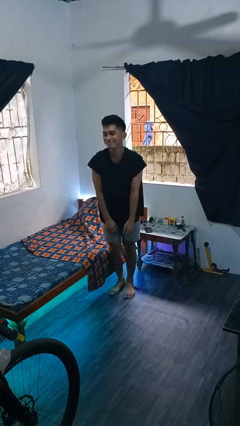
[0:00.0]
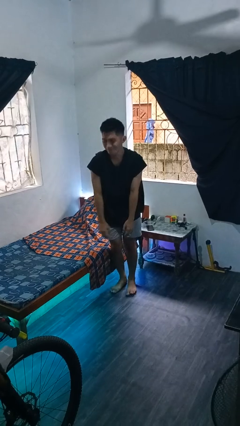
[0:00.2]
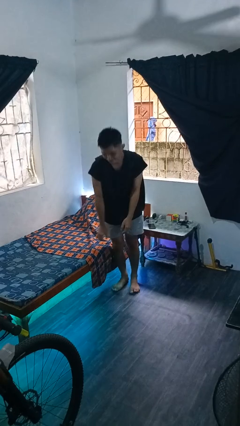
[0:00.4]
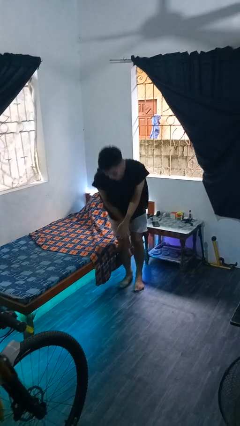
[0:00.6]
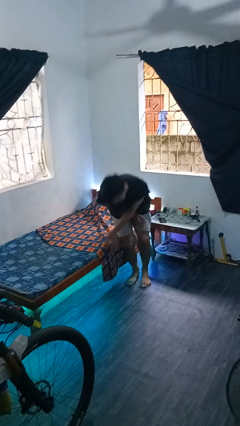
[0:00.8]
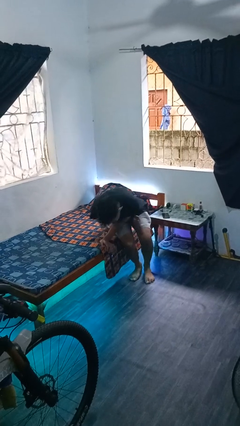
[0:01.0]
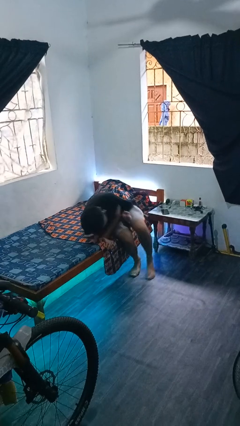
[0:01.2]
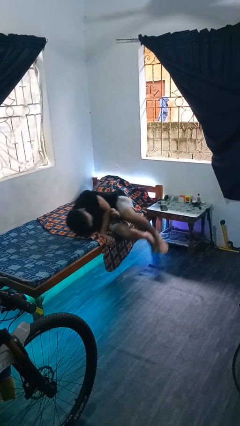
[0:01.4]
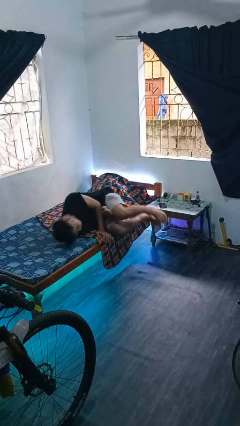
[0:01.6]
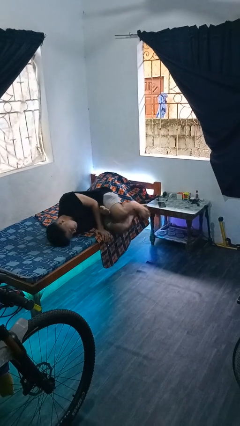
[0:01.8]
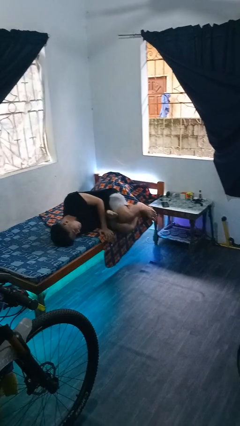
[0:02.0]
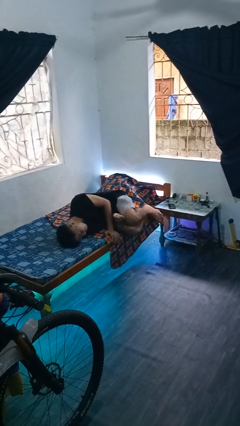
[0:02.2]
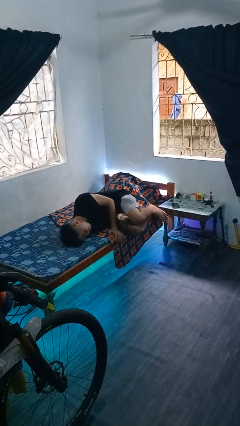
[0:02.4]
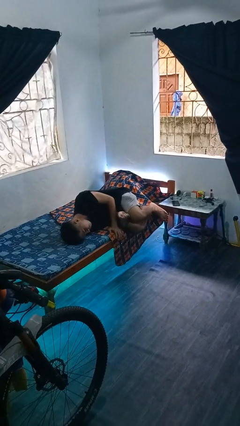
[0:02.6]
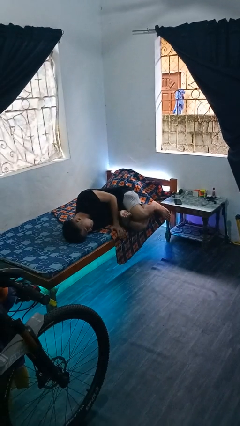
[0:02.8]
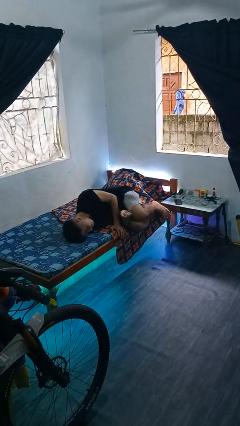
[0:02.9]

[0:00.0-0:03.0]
person lies down on bed

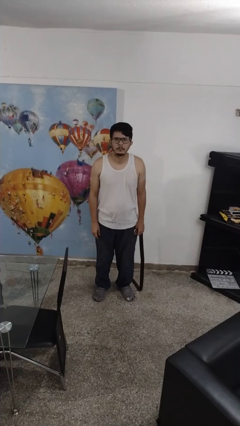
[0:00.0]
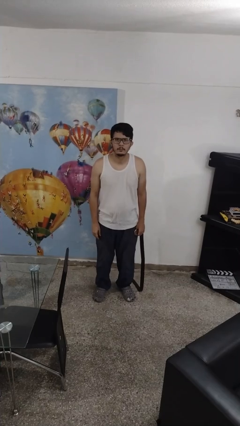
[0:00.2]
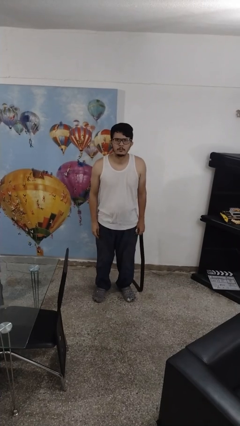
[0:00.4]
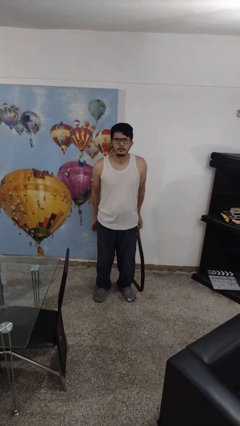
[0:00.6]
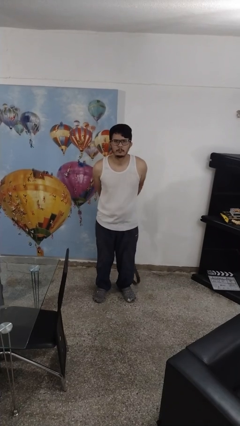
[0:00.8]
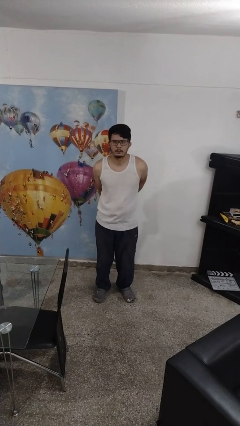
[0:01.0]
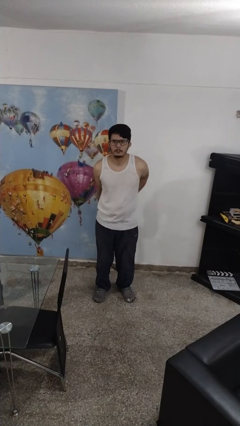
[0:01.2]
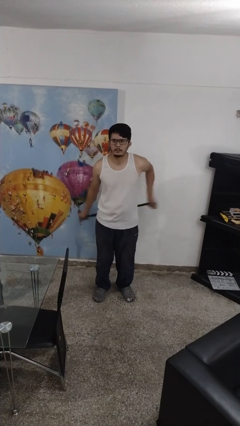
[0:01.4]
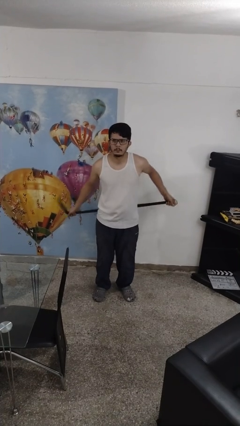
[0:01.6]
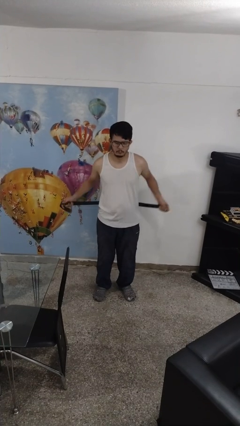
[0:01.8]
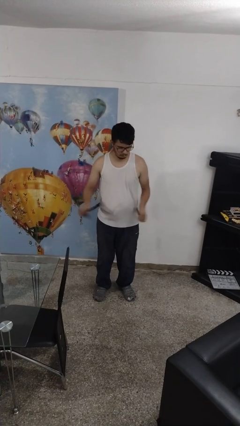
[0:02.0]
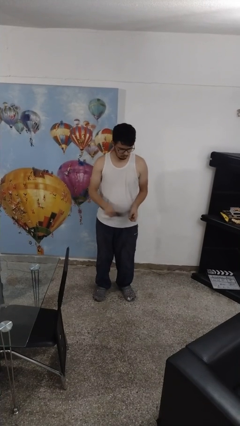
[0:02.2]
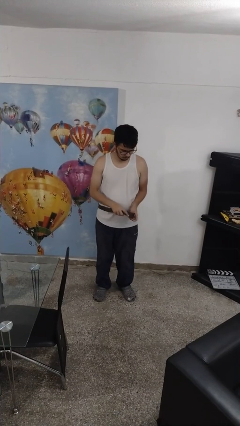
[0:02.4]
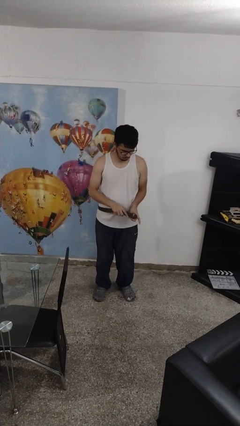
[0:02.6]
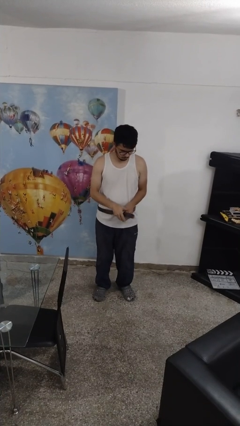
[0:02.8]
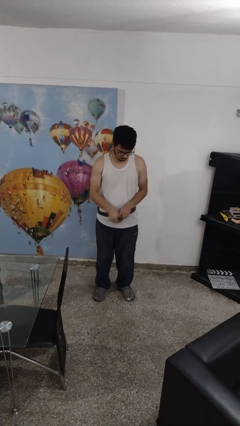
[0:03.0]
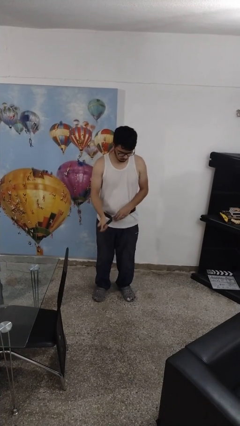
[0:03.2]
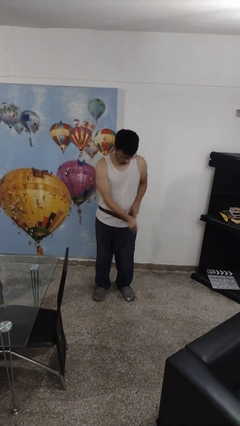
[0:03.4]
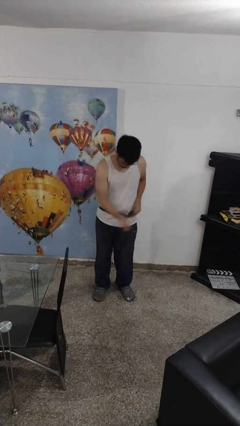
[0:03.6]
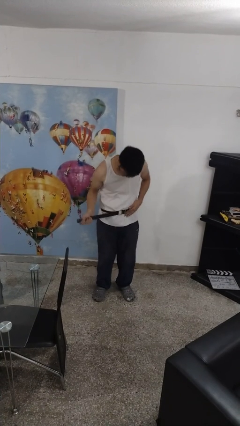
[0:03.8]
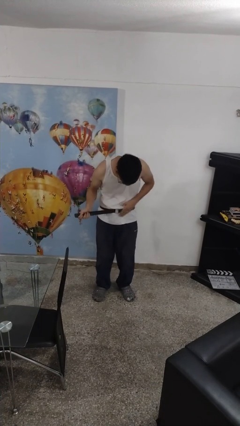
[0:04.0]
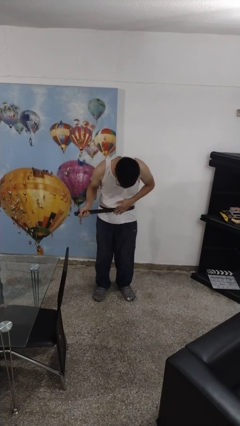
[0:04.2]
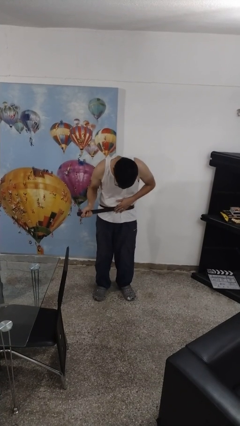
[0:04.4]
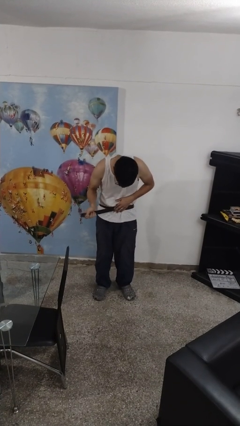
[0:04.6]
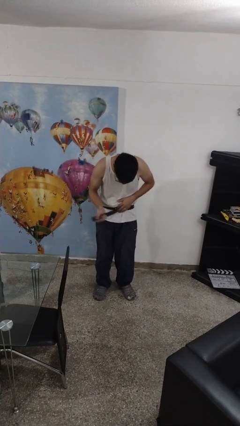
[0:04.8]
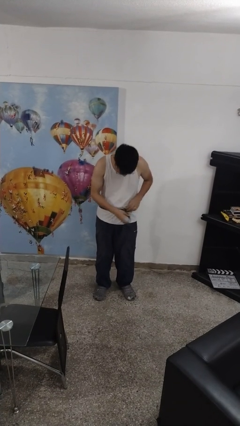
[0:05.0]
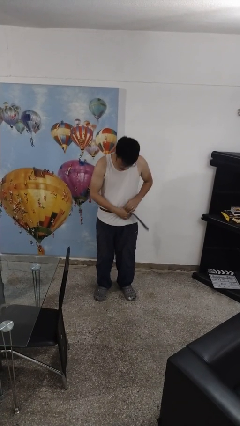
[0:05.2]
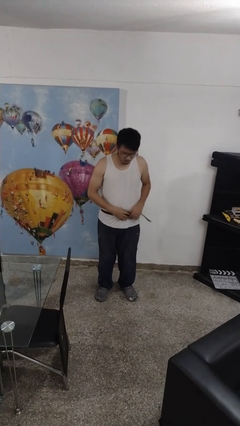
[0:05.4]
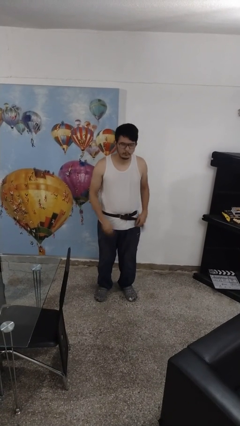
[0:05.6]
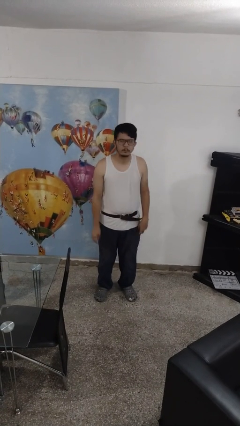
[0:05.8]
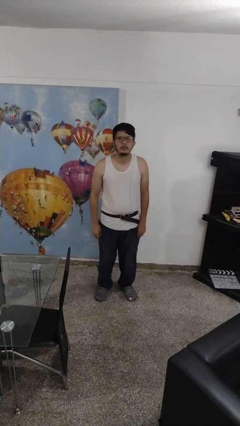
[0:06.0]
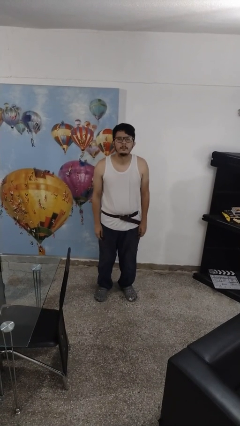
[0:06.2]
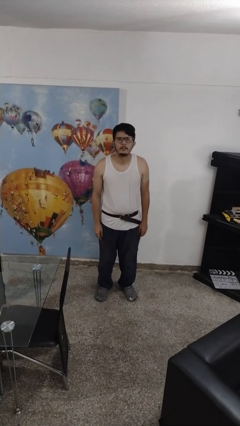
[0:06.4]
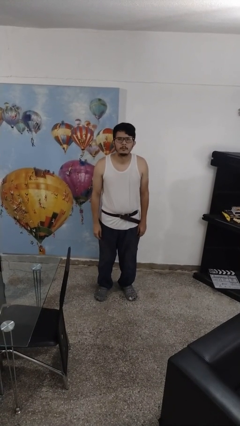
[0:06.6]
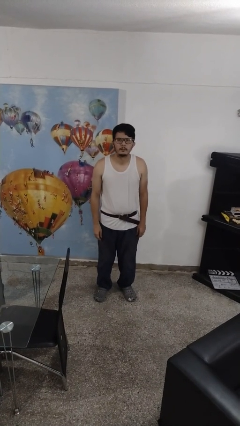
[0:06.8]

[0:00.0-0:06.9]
person puts on belt

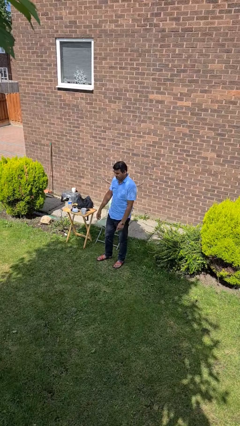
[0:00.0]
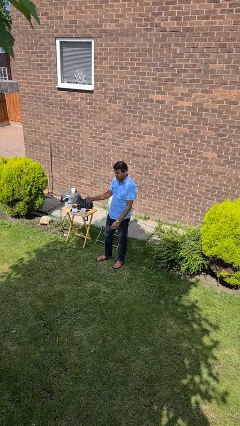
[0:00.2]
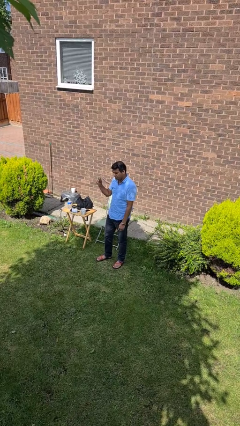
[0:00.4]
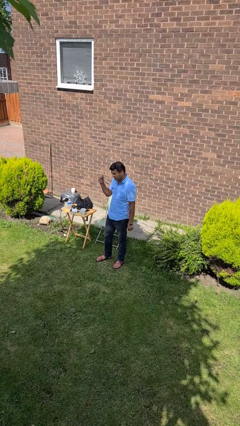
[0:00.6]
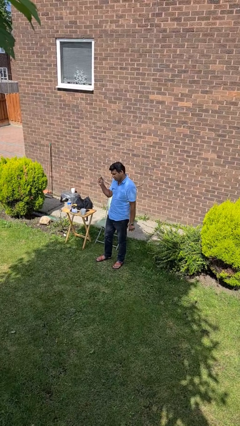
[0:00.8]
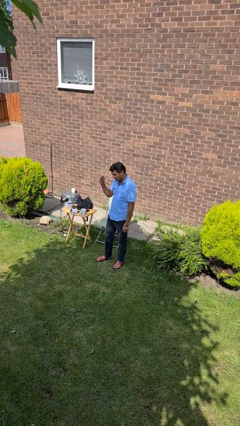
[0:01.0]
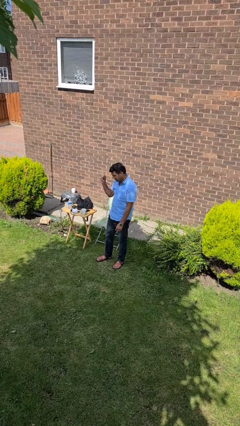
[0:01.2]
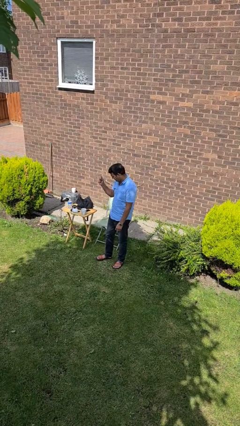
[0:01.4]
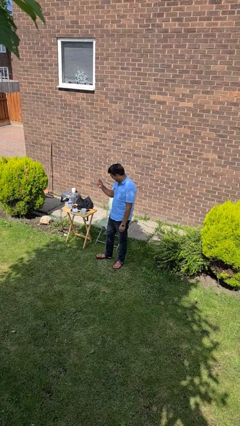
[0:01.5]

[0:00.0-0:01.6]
person snaps fingers

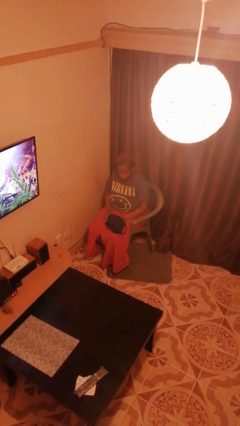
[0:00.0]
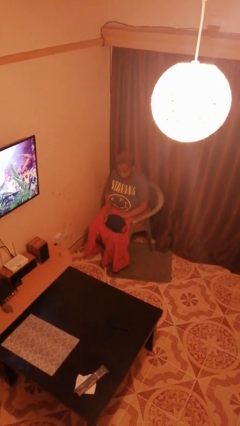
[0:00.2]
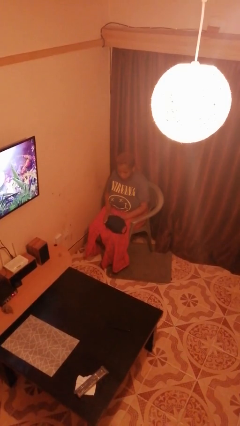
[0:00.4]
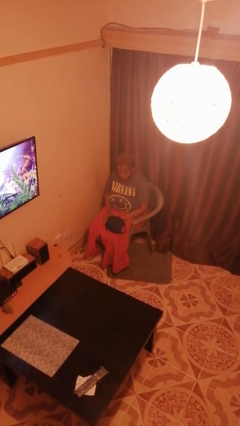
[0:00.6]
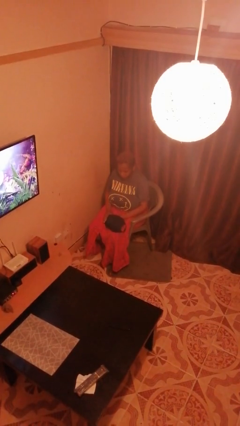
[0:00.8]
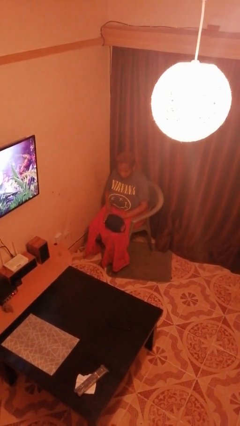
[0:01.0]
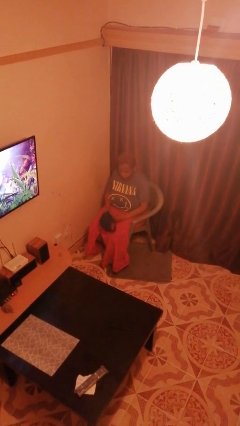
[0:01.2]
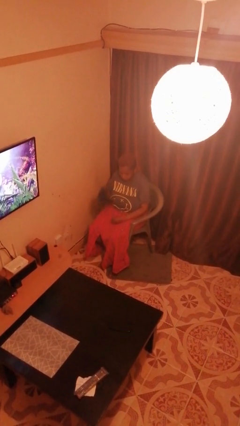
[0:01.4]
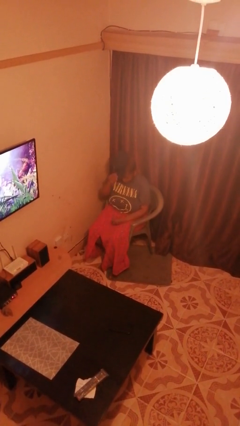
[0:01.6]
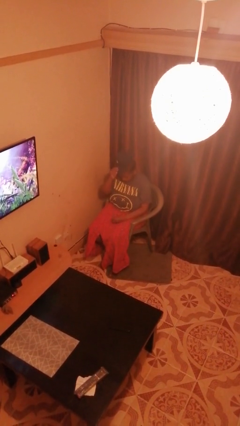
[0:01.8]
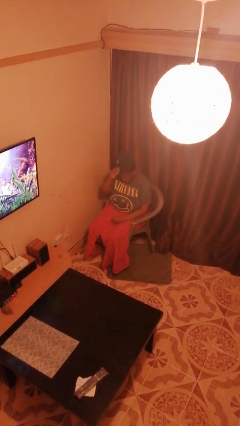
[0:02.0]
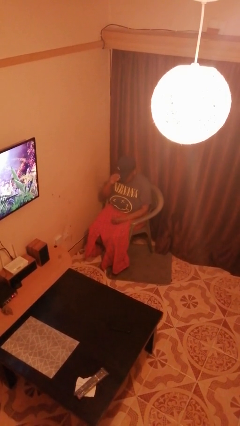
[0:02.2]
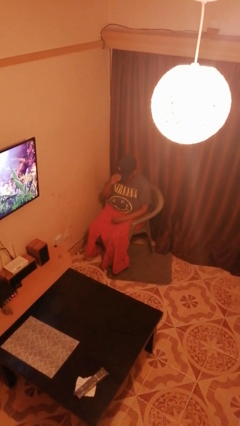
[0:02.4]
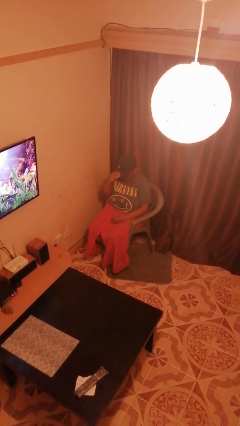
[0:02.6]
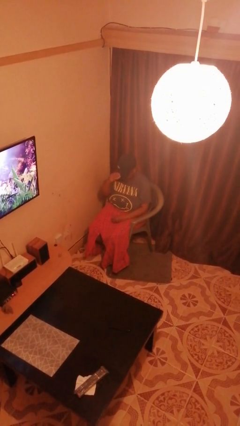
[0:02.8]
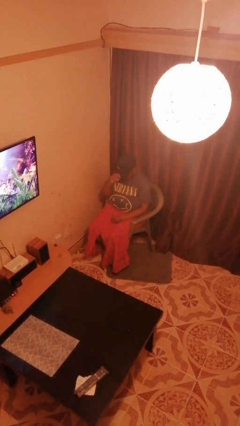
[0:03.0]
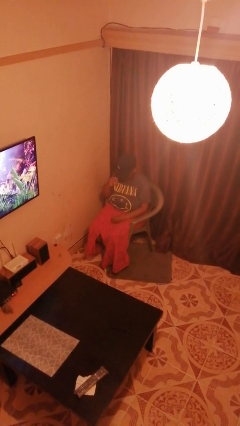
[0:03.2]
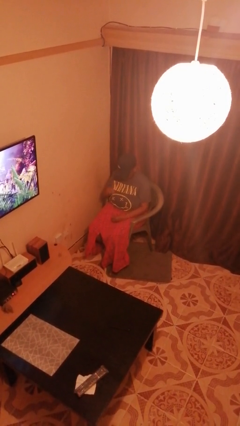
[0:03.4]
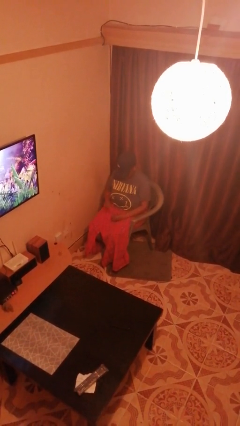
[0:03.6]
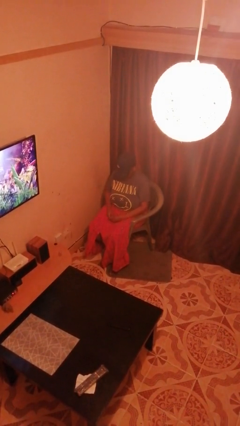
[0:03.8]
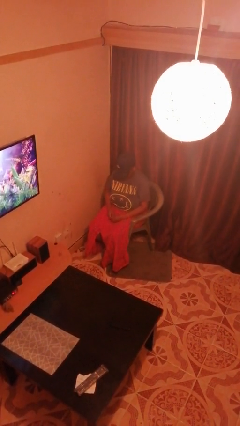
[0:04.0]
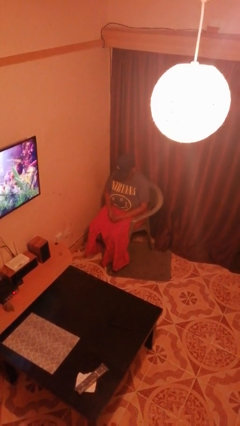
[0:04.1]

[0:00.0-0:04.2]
person puts on hat

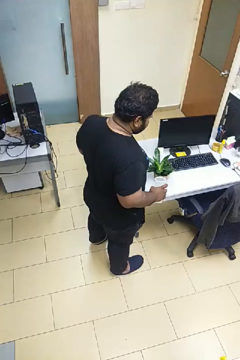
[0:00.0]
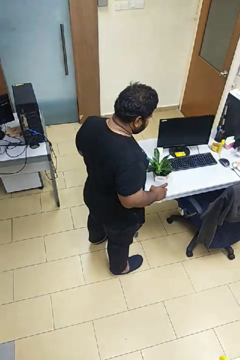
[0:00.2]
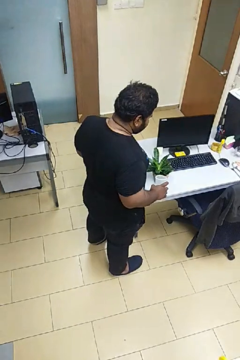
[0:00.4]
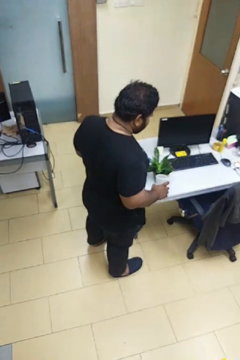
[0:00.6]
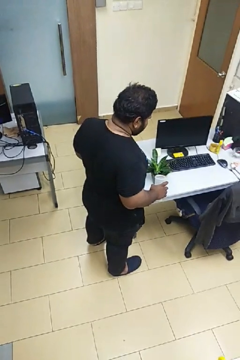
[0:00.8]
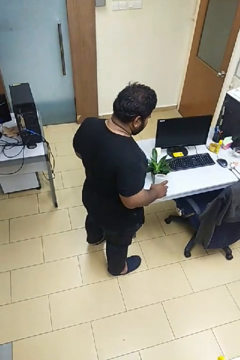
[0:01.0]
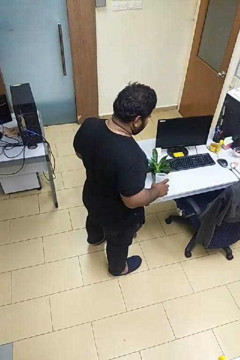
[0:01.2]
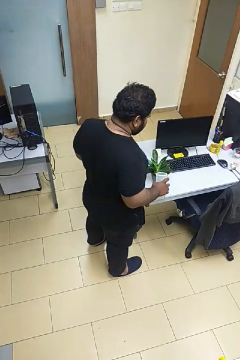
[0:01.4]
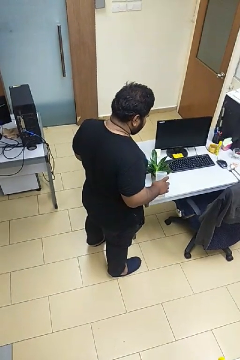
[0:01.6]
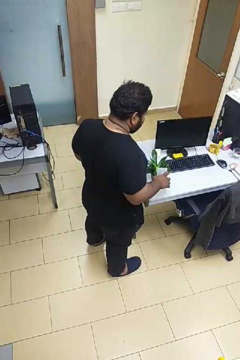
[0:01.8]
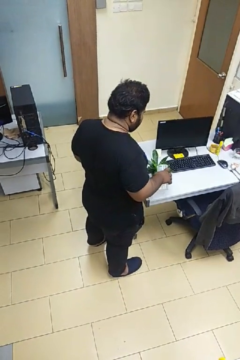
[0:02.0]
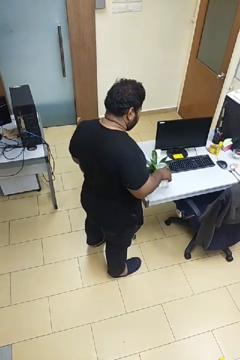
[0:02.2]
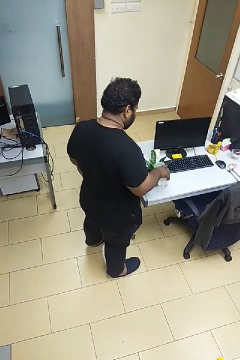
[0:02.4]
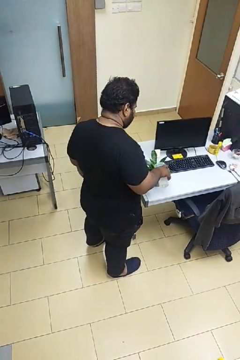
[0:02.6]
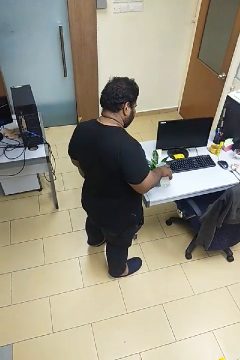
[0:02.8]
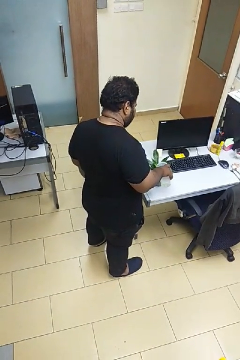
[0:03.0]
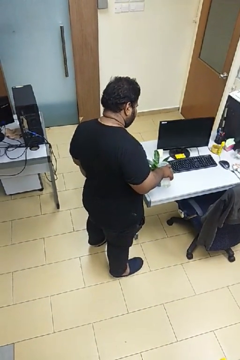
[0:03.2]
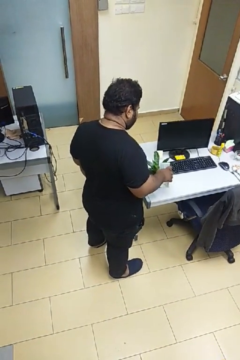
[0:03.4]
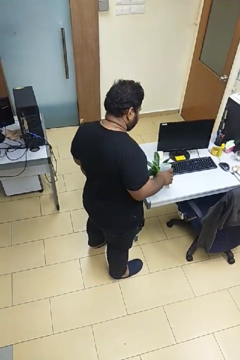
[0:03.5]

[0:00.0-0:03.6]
person waters houseplant
